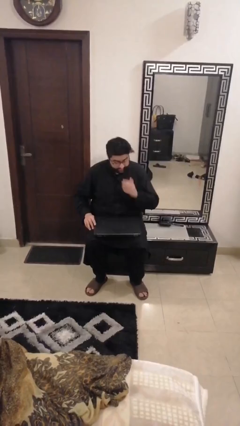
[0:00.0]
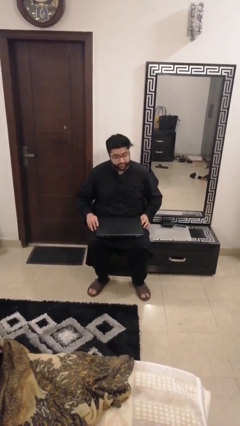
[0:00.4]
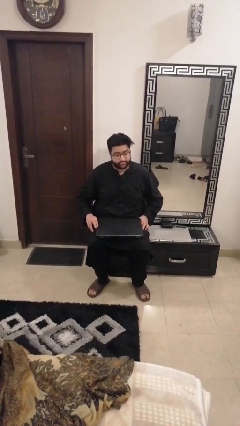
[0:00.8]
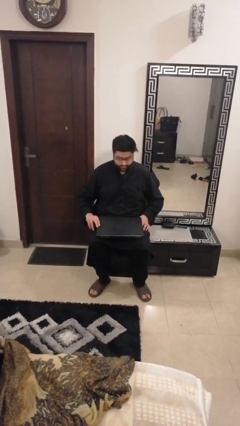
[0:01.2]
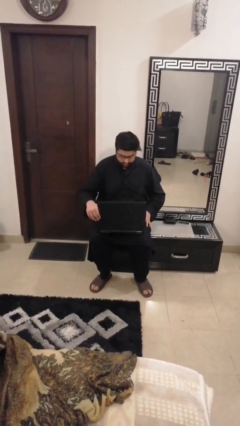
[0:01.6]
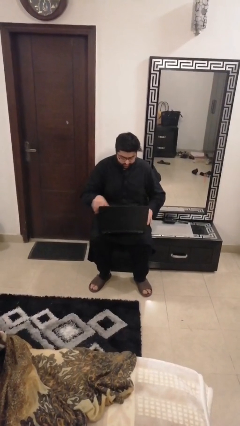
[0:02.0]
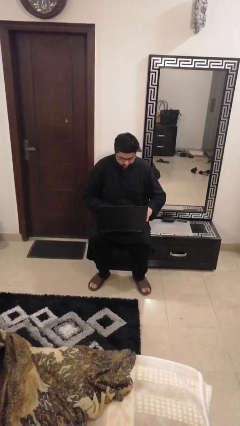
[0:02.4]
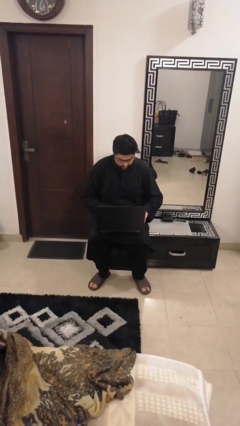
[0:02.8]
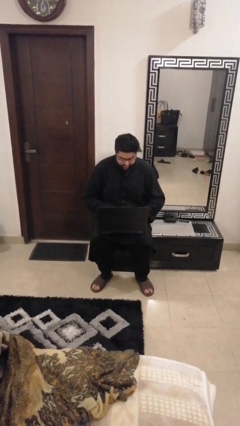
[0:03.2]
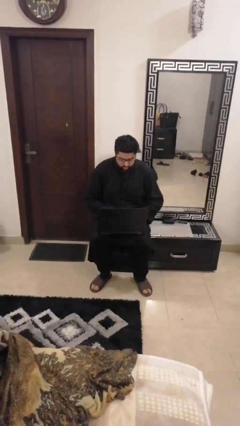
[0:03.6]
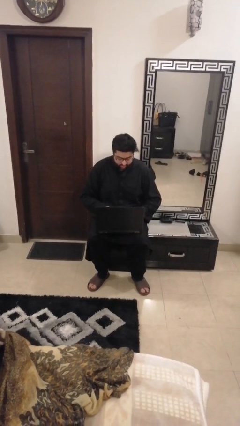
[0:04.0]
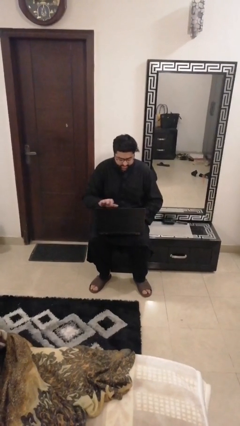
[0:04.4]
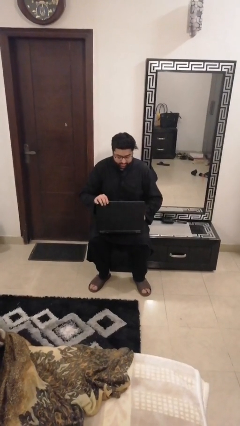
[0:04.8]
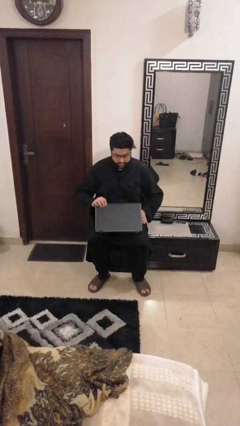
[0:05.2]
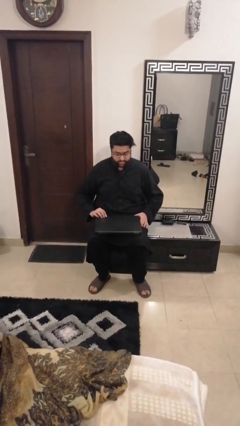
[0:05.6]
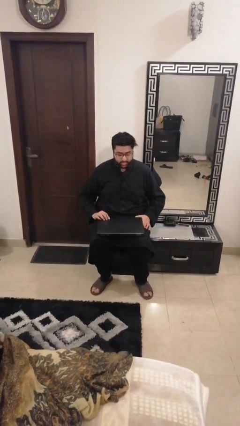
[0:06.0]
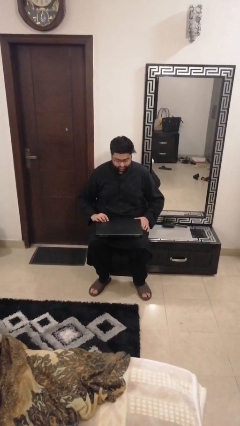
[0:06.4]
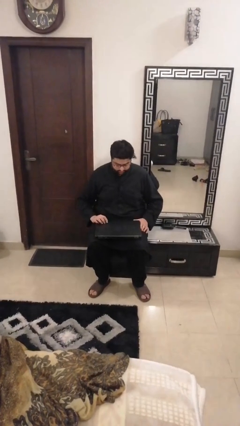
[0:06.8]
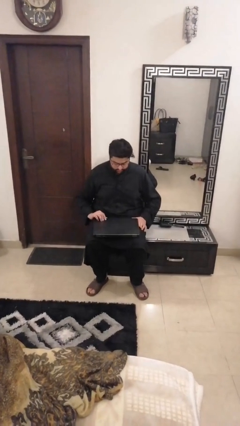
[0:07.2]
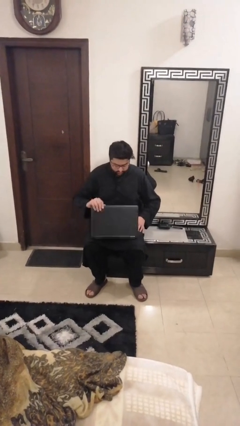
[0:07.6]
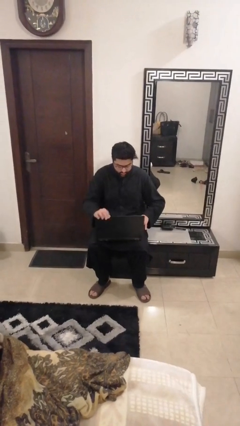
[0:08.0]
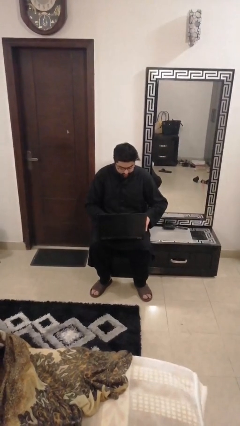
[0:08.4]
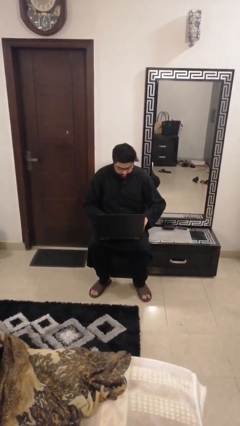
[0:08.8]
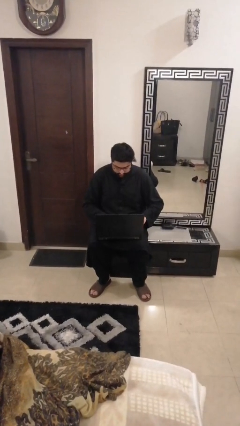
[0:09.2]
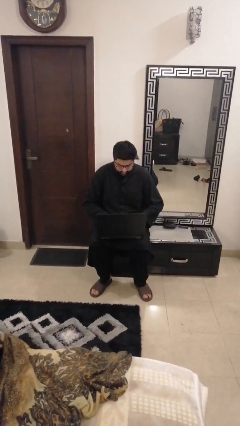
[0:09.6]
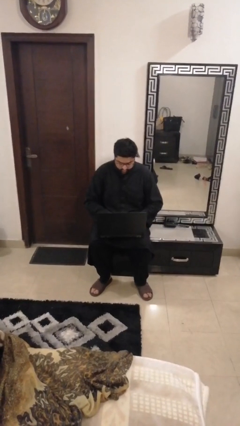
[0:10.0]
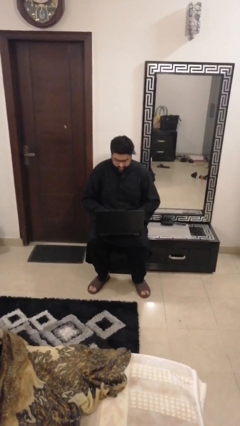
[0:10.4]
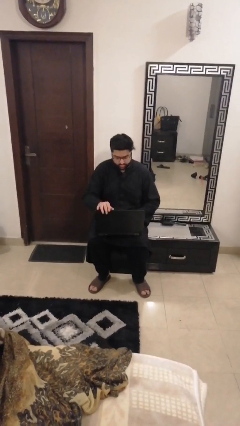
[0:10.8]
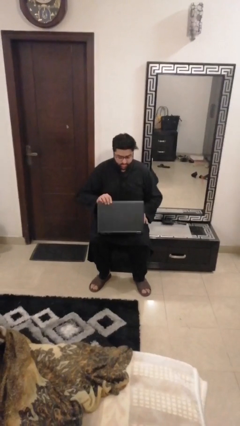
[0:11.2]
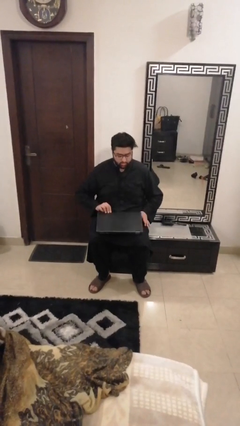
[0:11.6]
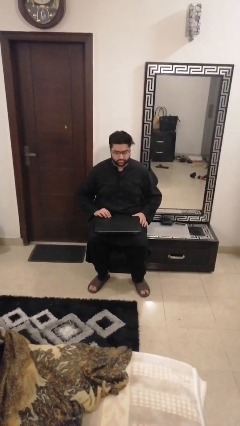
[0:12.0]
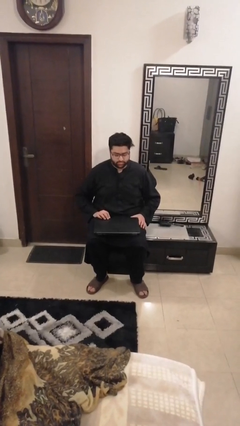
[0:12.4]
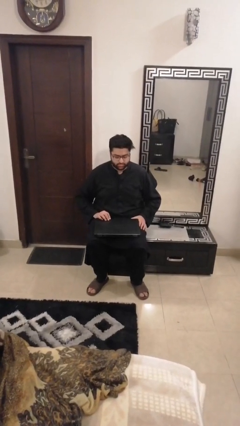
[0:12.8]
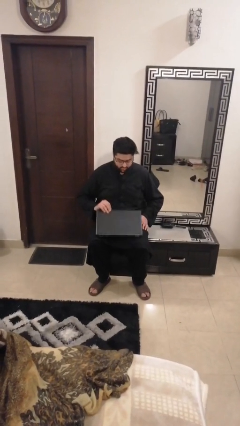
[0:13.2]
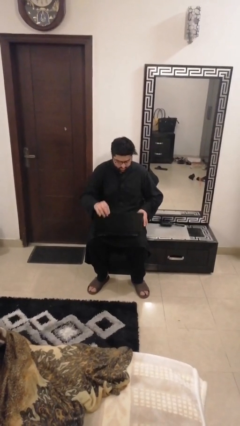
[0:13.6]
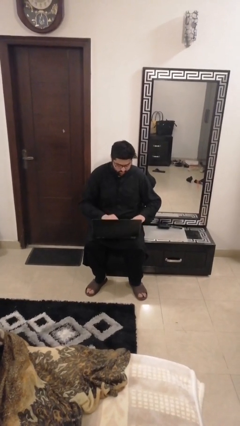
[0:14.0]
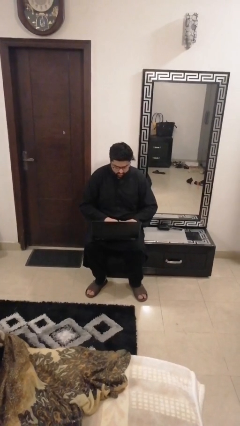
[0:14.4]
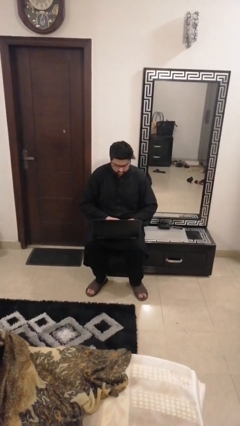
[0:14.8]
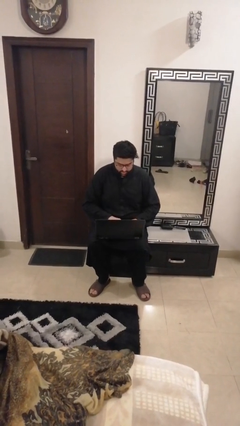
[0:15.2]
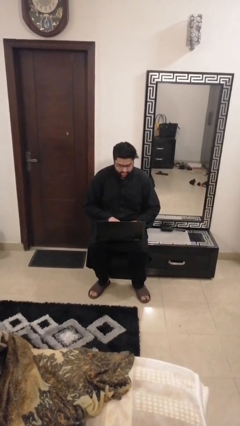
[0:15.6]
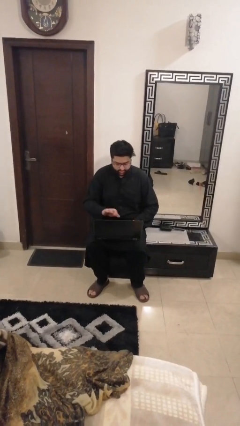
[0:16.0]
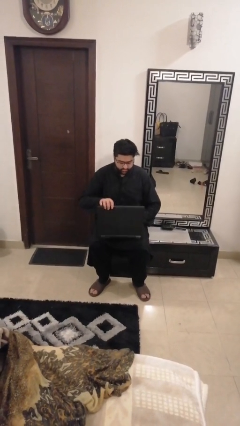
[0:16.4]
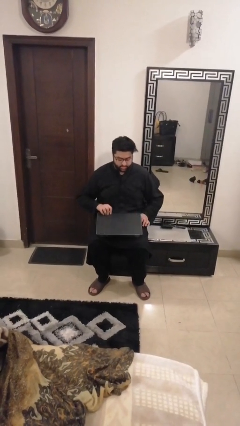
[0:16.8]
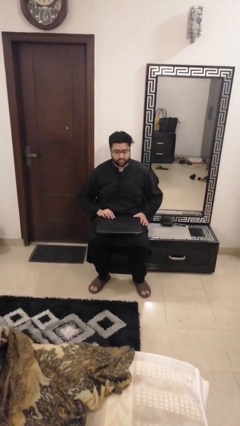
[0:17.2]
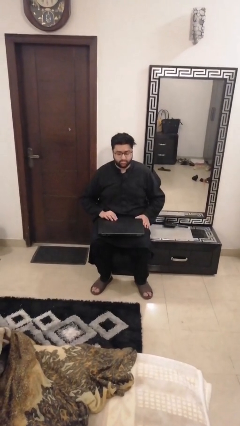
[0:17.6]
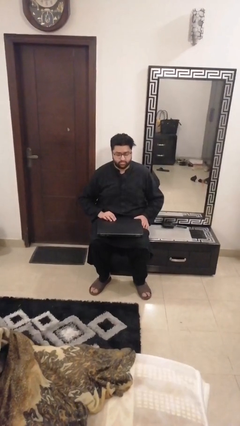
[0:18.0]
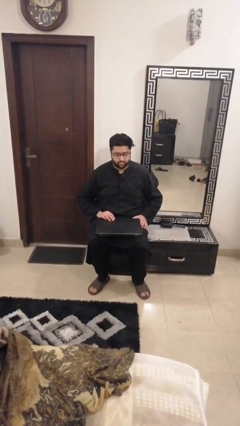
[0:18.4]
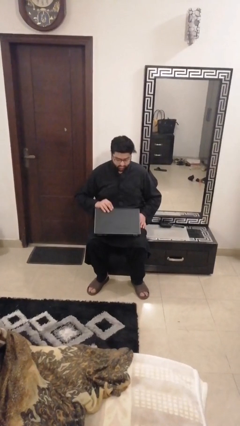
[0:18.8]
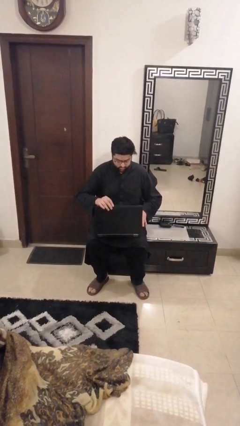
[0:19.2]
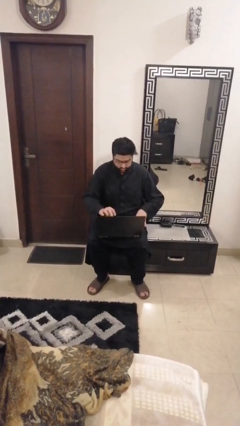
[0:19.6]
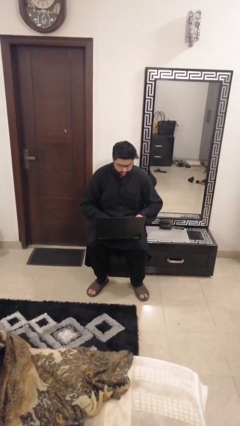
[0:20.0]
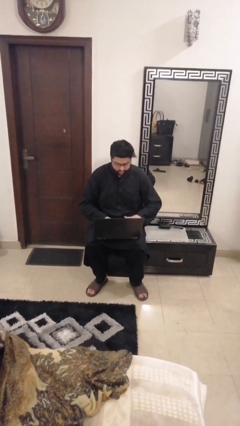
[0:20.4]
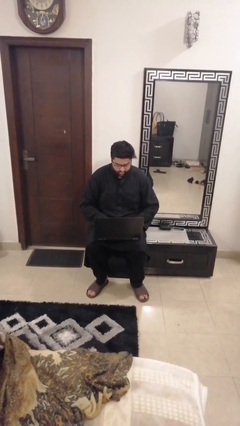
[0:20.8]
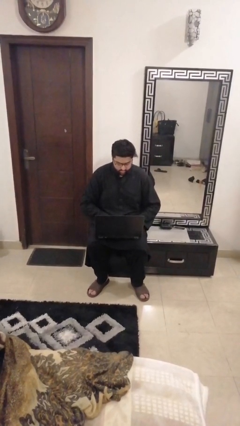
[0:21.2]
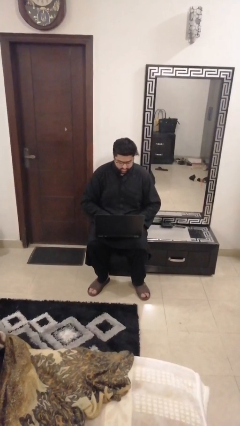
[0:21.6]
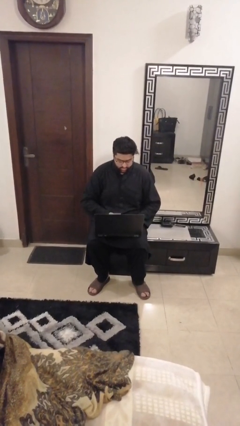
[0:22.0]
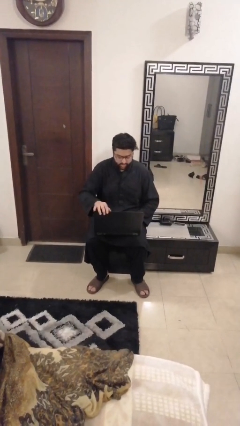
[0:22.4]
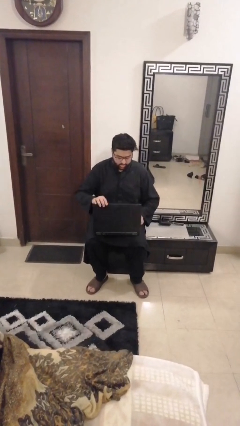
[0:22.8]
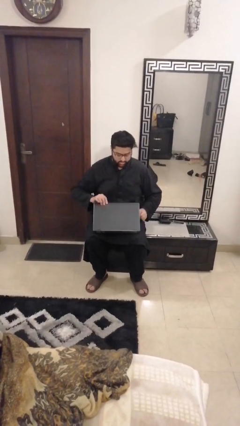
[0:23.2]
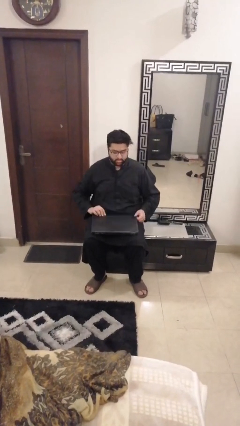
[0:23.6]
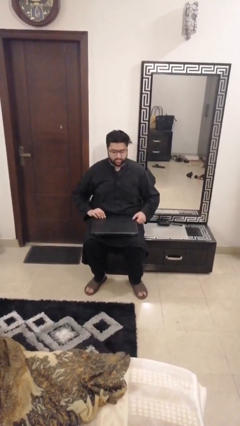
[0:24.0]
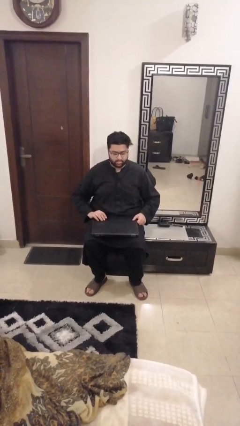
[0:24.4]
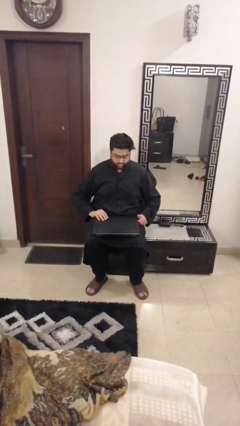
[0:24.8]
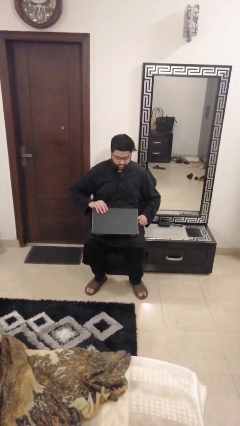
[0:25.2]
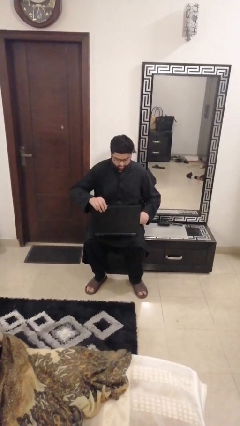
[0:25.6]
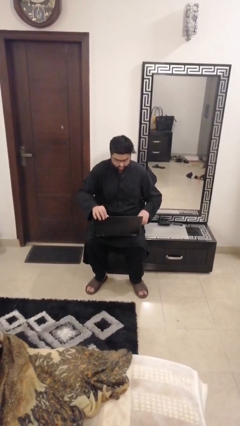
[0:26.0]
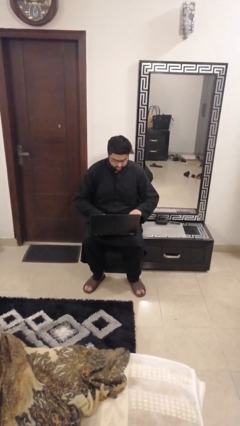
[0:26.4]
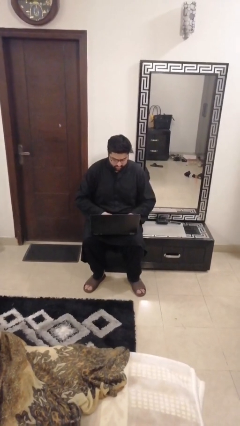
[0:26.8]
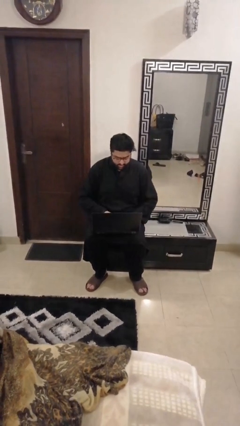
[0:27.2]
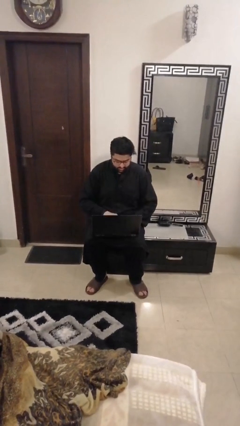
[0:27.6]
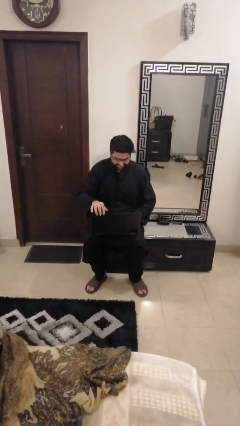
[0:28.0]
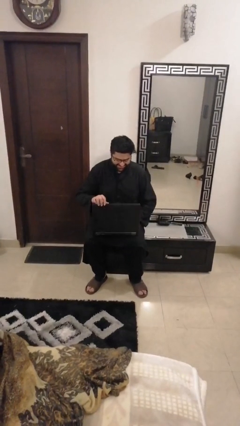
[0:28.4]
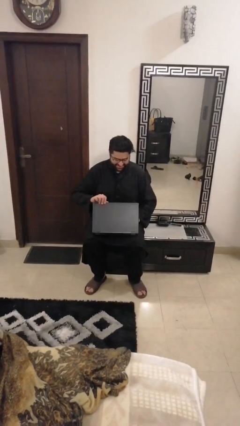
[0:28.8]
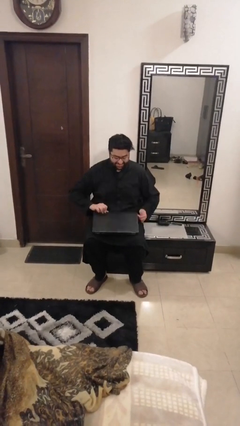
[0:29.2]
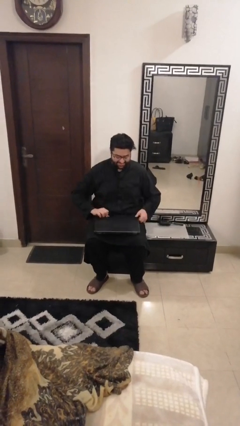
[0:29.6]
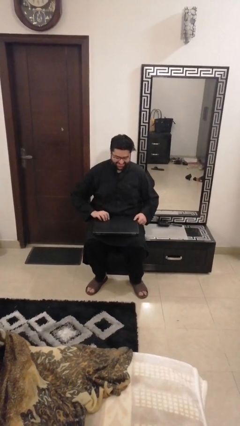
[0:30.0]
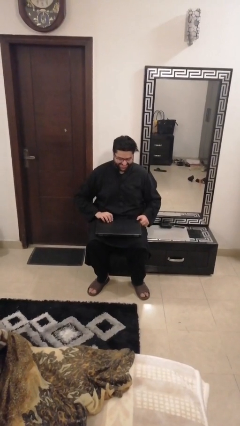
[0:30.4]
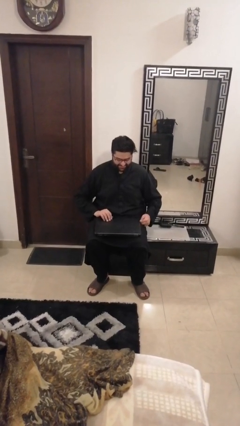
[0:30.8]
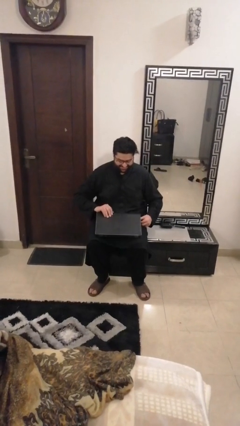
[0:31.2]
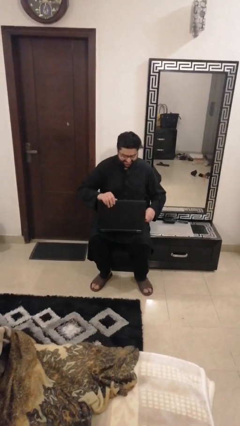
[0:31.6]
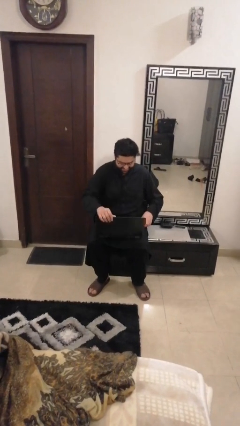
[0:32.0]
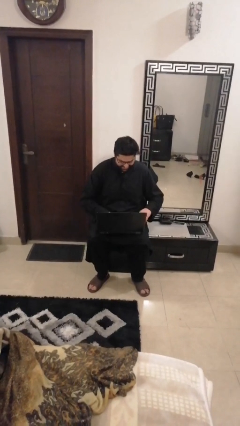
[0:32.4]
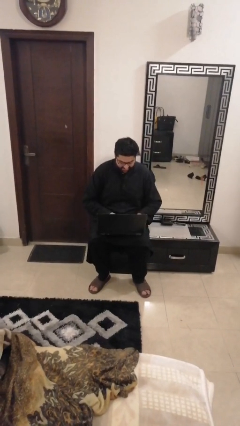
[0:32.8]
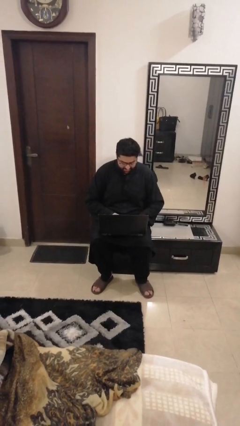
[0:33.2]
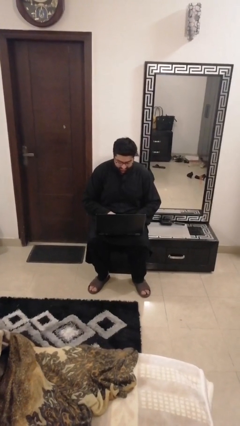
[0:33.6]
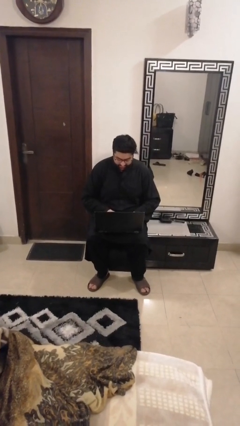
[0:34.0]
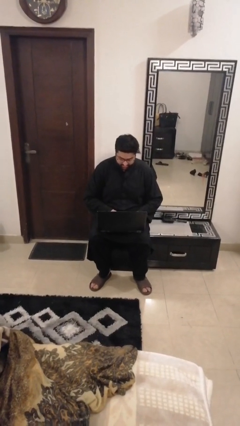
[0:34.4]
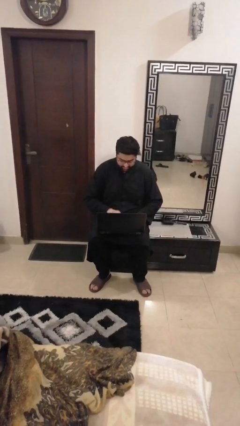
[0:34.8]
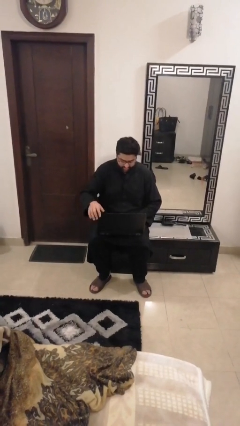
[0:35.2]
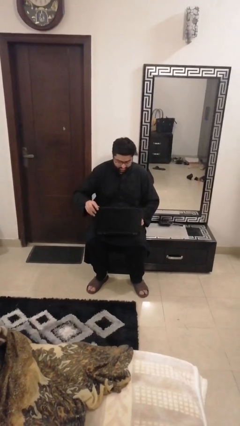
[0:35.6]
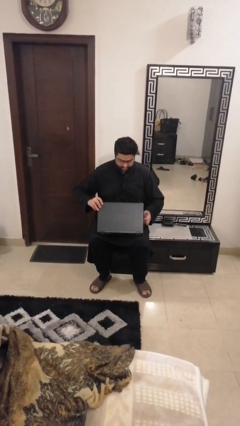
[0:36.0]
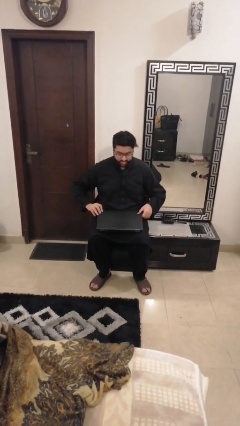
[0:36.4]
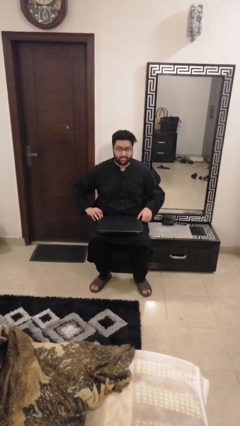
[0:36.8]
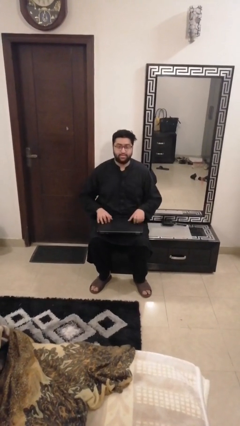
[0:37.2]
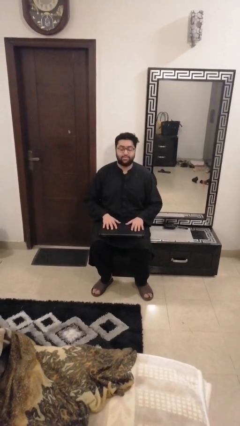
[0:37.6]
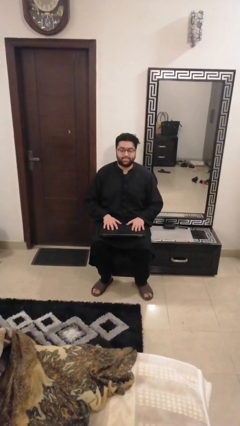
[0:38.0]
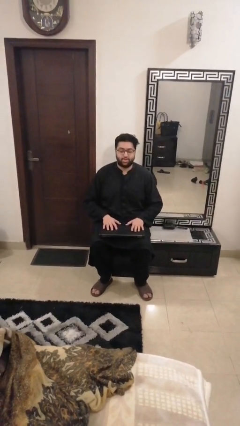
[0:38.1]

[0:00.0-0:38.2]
person interacts with laptop
